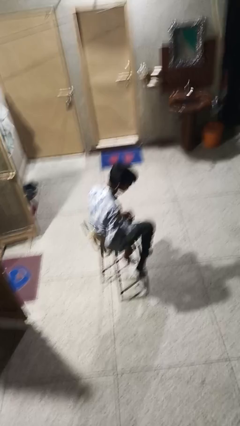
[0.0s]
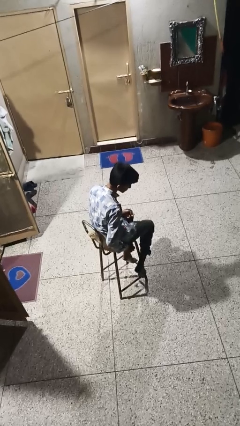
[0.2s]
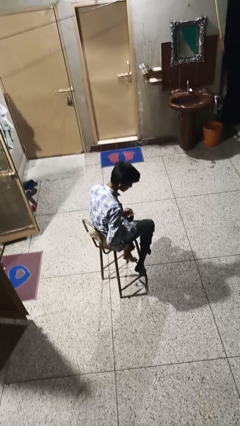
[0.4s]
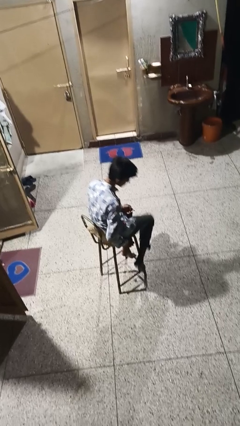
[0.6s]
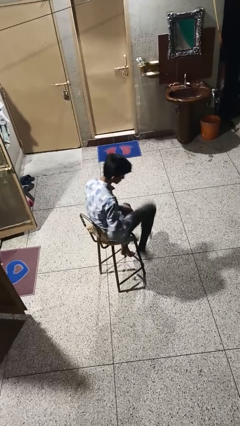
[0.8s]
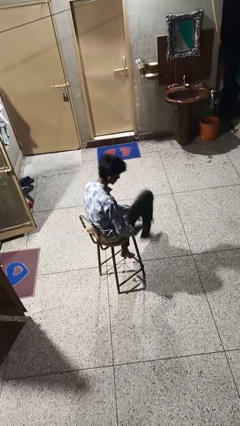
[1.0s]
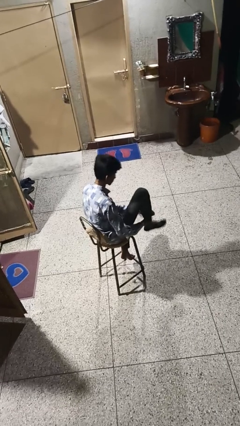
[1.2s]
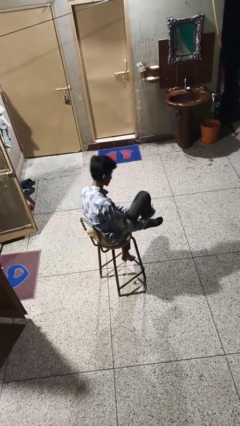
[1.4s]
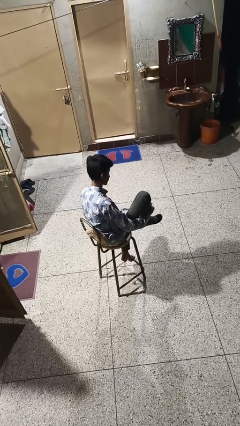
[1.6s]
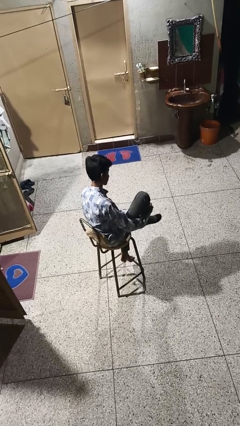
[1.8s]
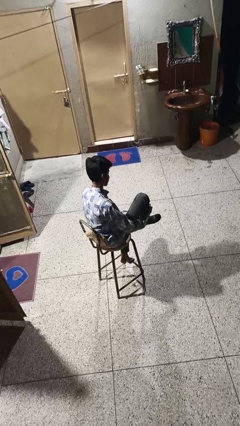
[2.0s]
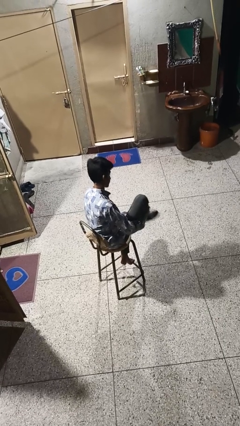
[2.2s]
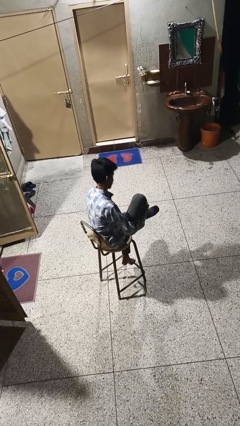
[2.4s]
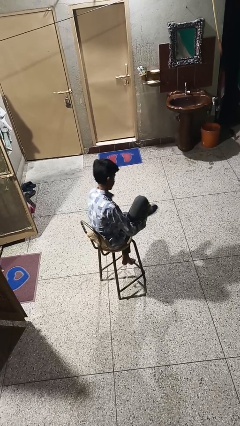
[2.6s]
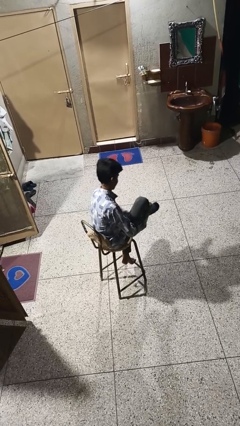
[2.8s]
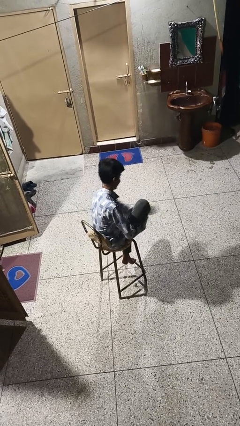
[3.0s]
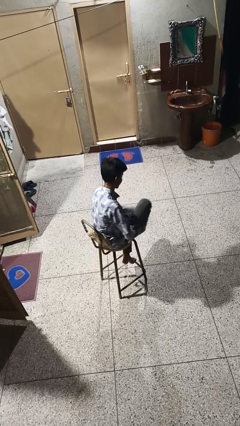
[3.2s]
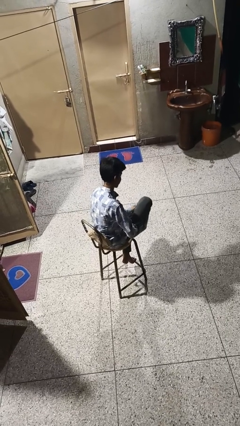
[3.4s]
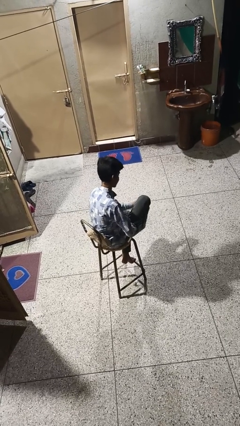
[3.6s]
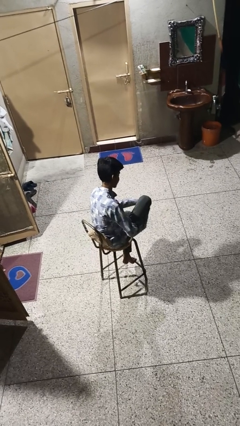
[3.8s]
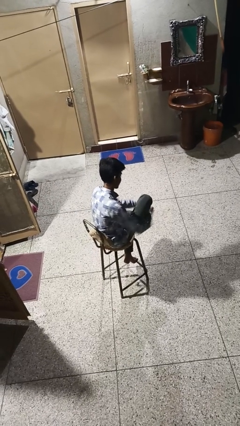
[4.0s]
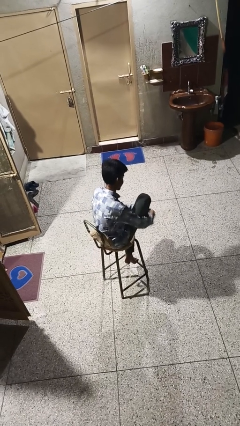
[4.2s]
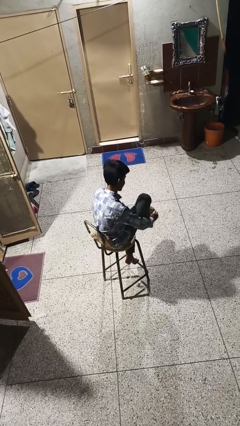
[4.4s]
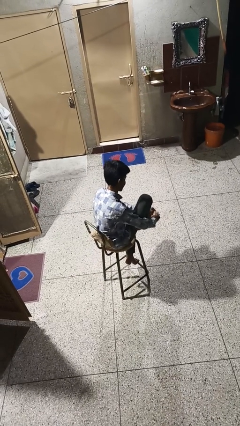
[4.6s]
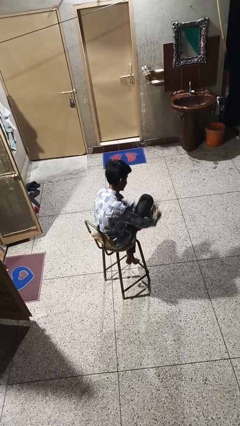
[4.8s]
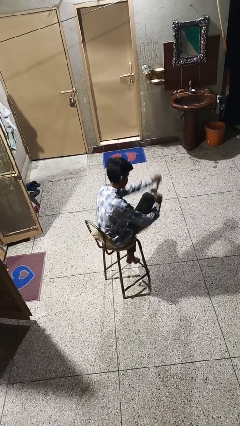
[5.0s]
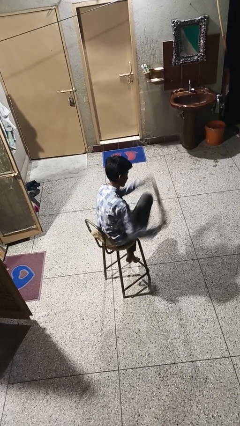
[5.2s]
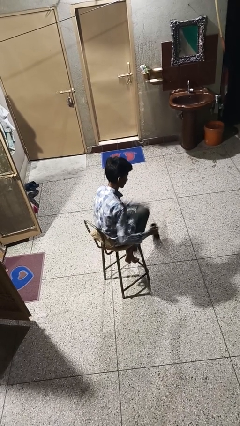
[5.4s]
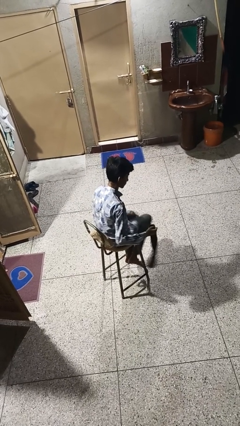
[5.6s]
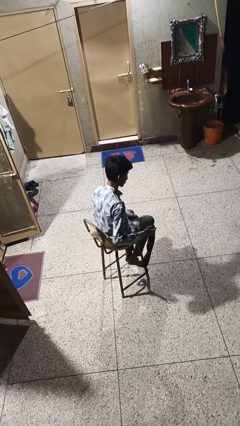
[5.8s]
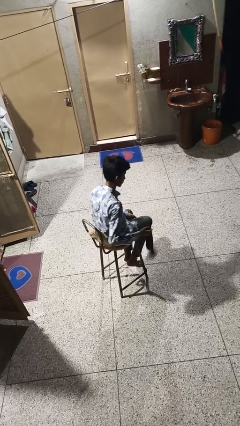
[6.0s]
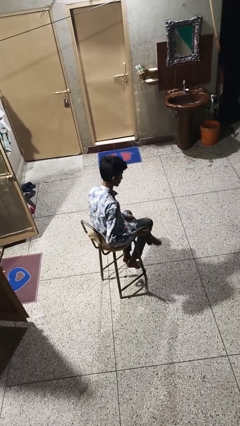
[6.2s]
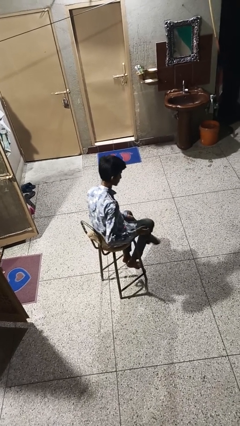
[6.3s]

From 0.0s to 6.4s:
person takes off socks

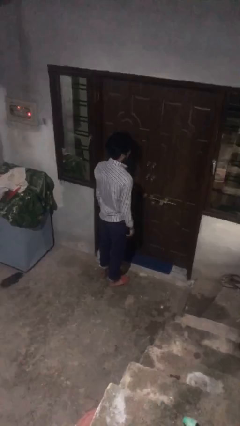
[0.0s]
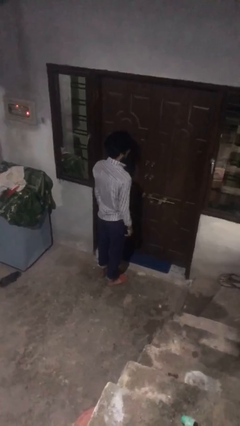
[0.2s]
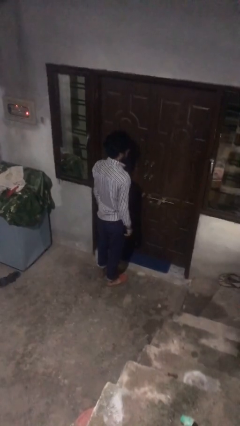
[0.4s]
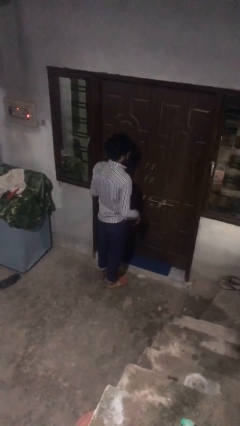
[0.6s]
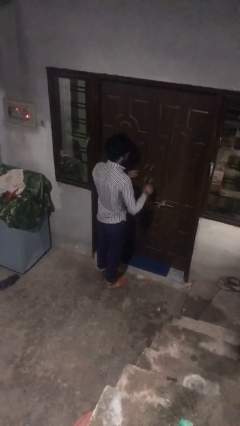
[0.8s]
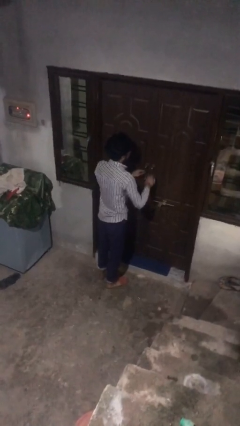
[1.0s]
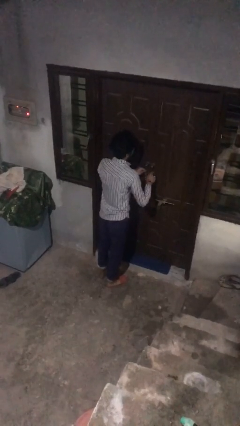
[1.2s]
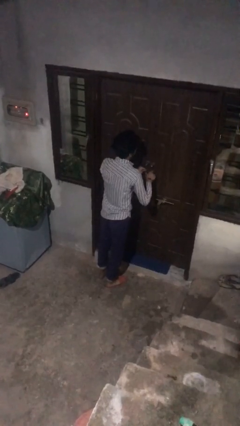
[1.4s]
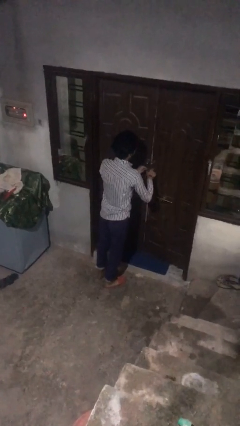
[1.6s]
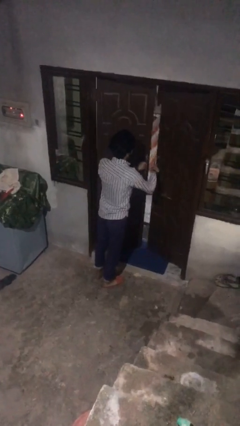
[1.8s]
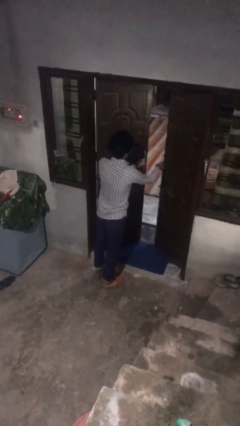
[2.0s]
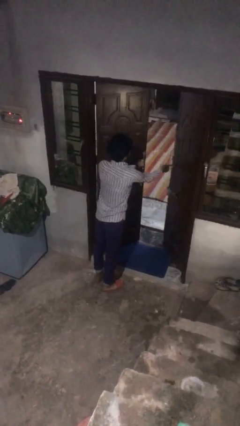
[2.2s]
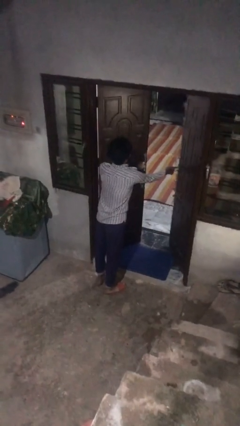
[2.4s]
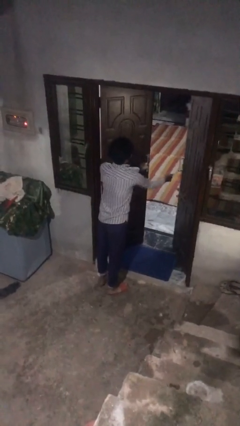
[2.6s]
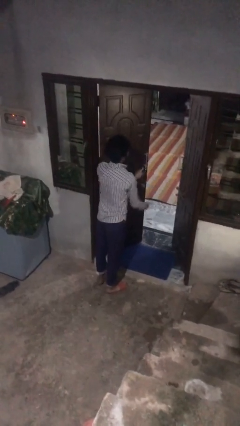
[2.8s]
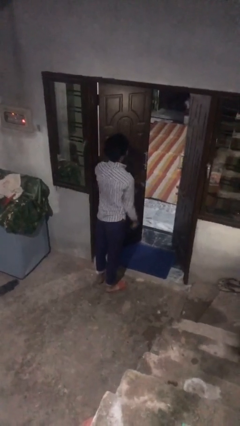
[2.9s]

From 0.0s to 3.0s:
person opens facility door

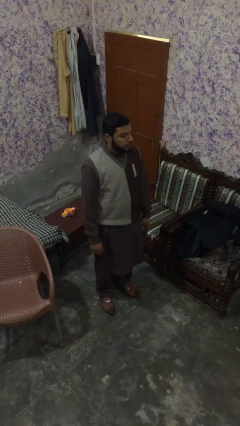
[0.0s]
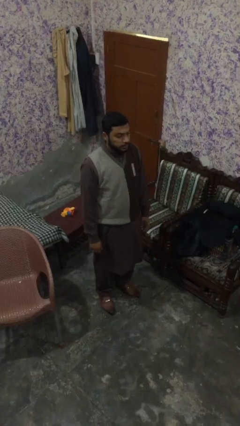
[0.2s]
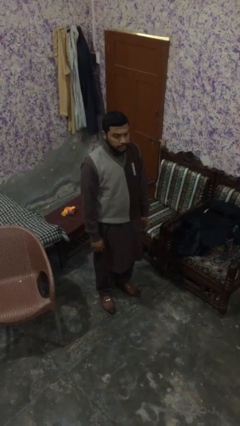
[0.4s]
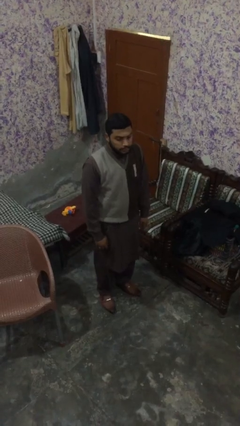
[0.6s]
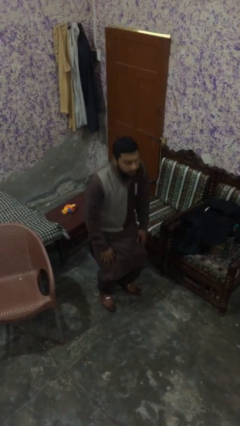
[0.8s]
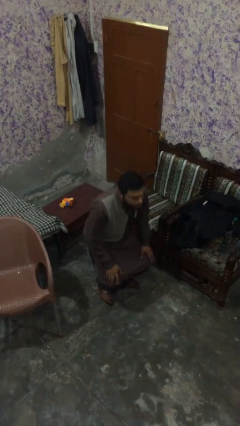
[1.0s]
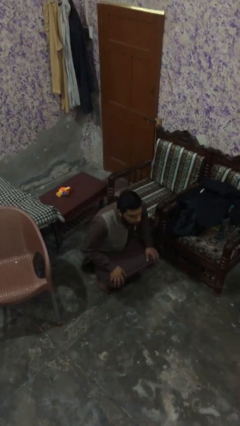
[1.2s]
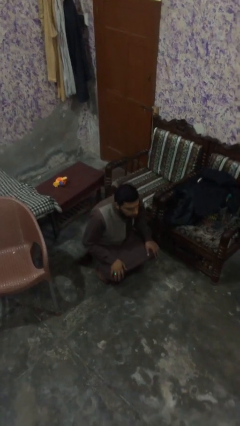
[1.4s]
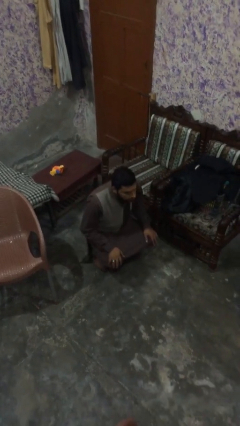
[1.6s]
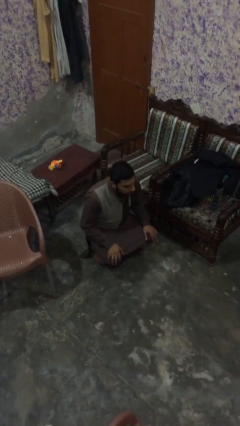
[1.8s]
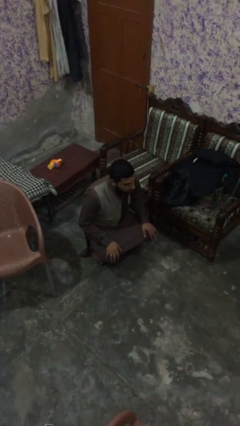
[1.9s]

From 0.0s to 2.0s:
person sits down

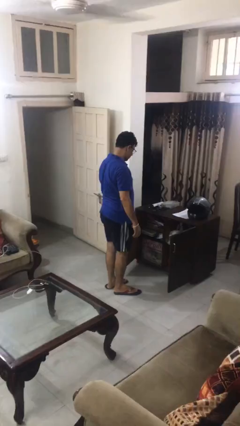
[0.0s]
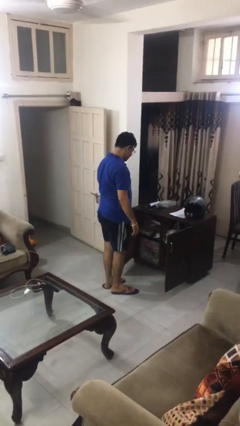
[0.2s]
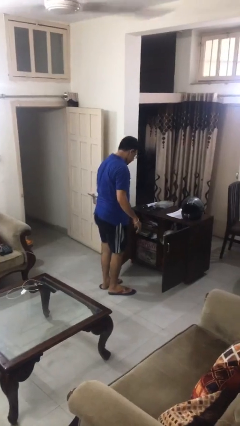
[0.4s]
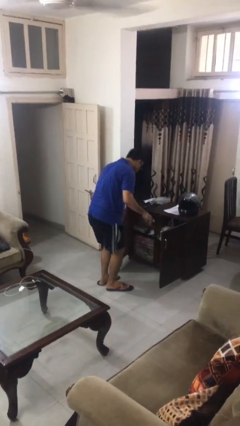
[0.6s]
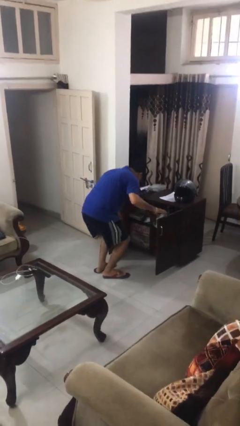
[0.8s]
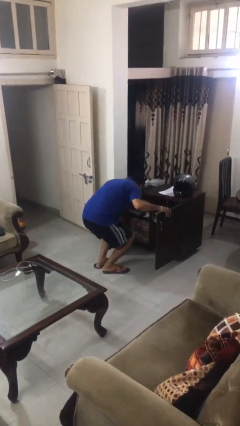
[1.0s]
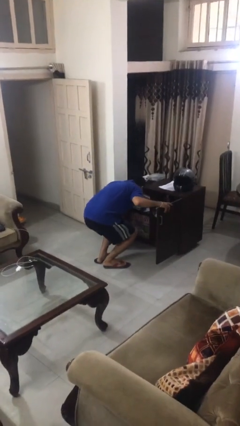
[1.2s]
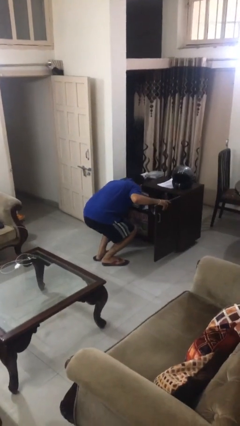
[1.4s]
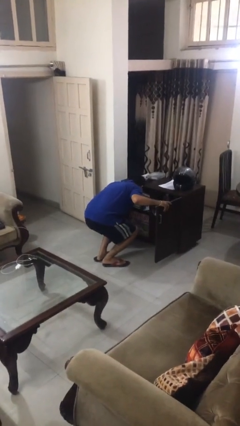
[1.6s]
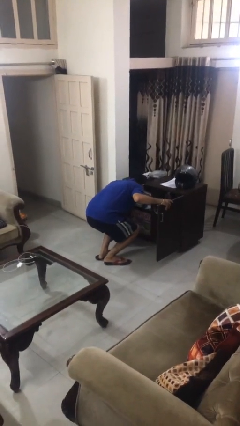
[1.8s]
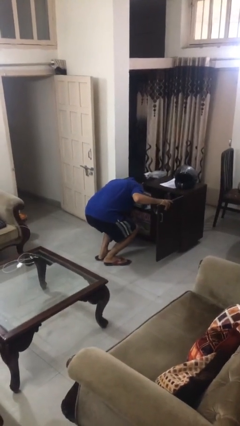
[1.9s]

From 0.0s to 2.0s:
person searches in cabinet

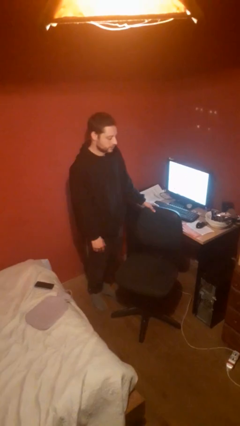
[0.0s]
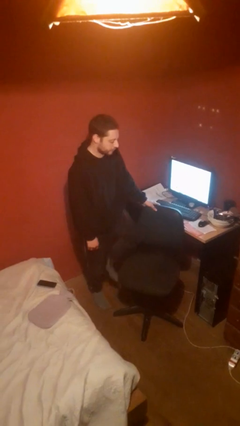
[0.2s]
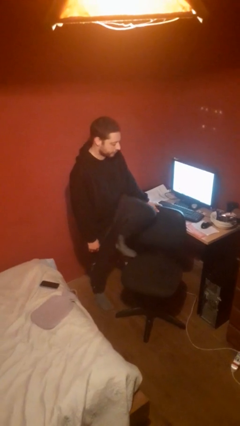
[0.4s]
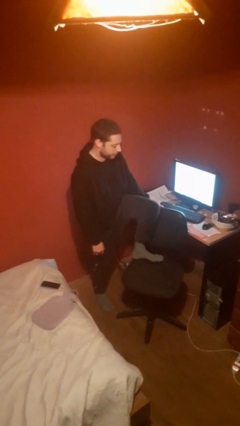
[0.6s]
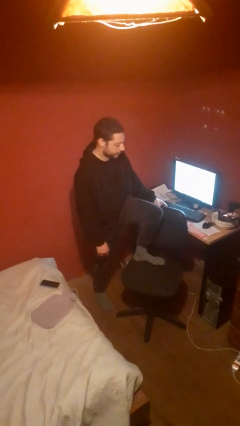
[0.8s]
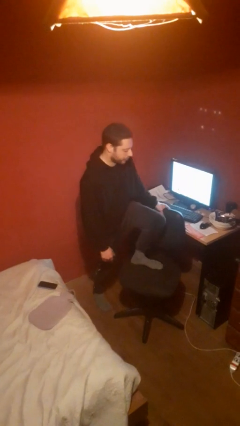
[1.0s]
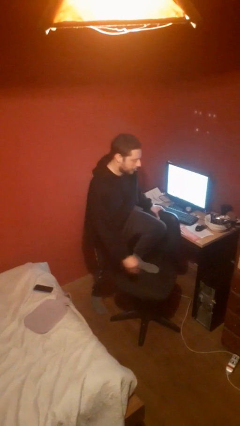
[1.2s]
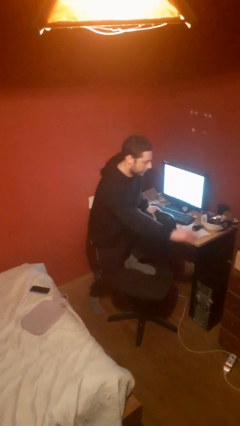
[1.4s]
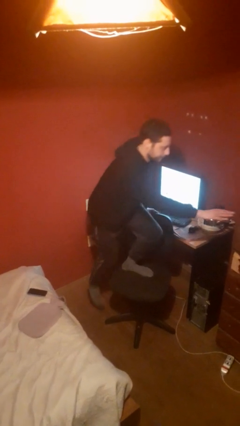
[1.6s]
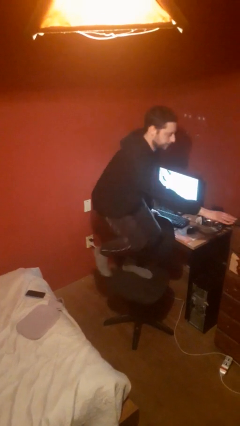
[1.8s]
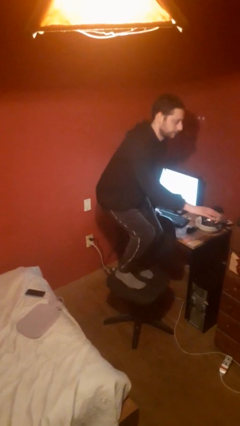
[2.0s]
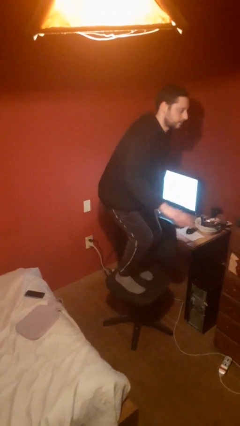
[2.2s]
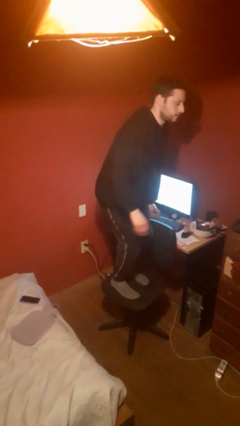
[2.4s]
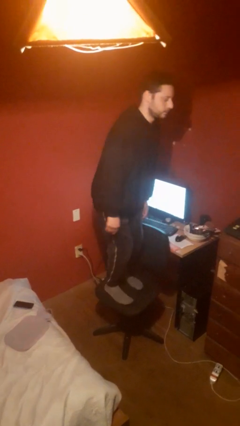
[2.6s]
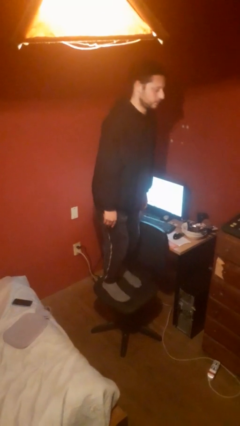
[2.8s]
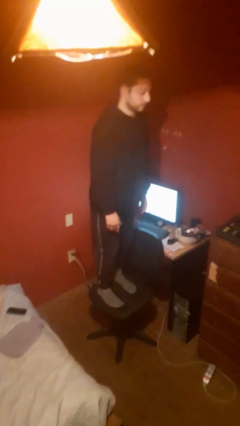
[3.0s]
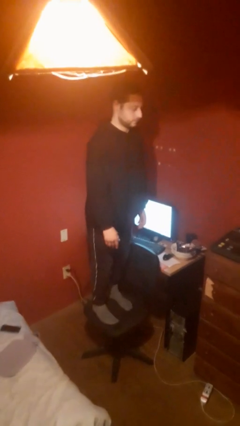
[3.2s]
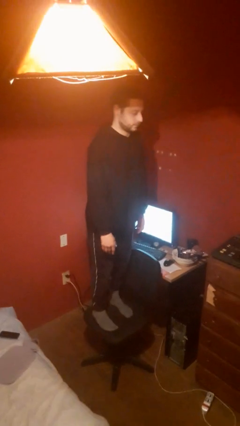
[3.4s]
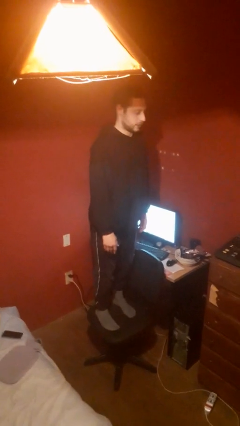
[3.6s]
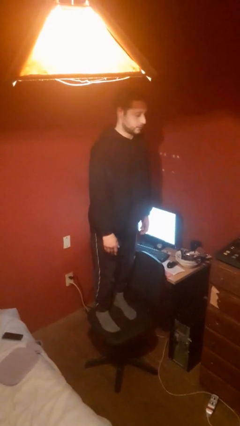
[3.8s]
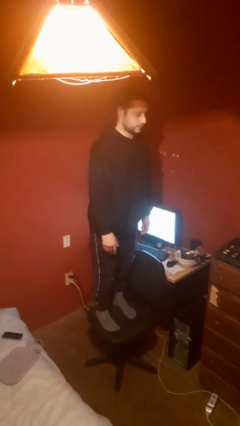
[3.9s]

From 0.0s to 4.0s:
person climbs on chair
